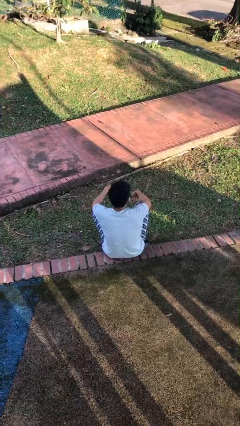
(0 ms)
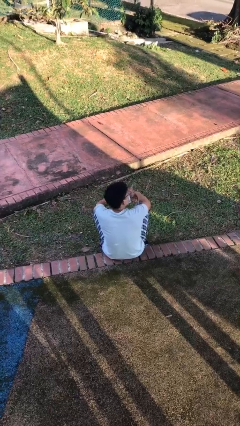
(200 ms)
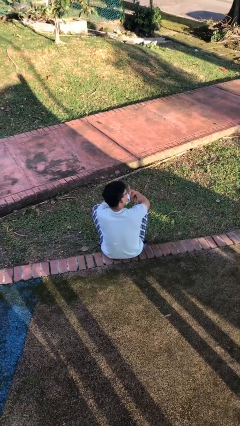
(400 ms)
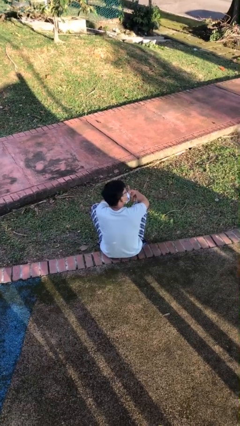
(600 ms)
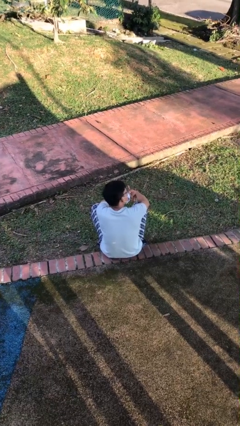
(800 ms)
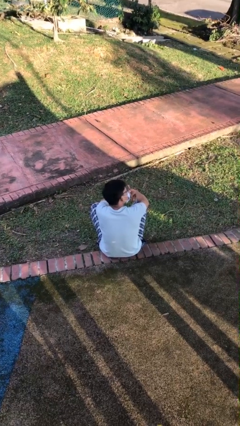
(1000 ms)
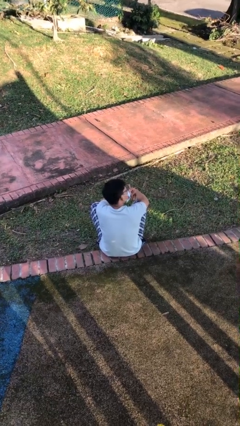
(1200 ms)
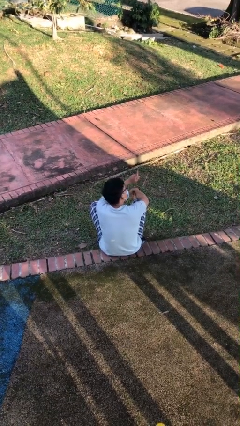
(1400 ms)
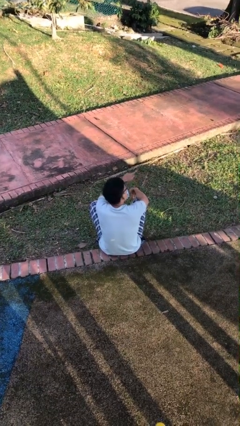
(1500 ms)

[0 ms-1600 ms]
person gestures be quiet

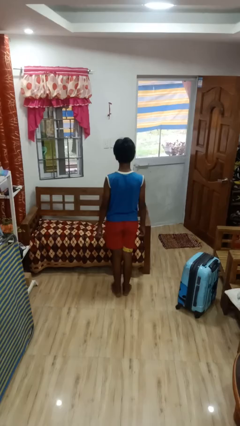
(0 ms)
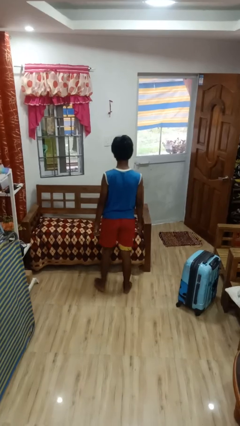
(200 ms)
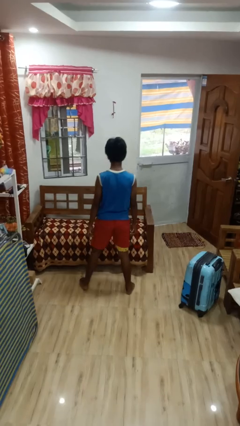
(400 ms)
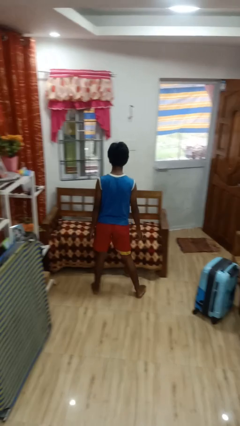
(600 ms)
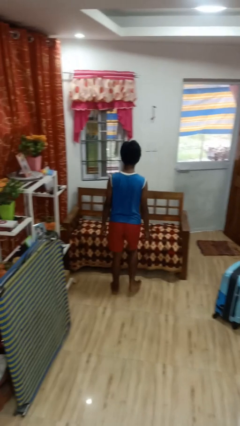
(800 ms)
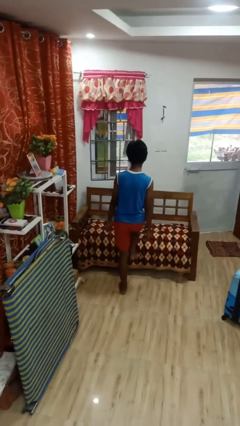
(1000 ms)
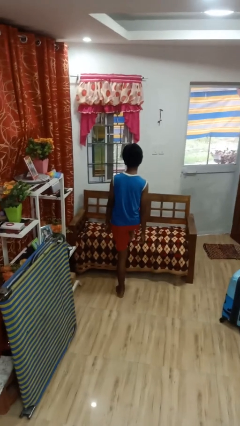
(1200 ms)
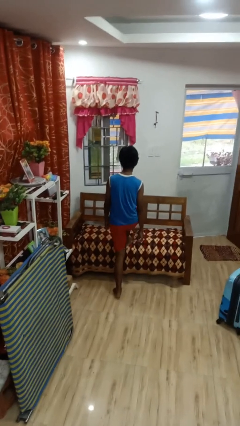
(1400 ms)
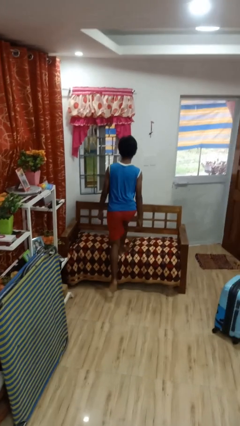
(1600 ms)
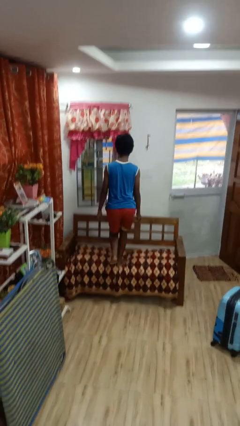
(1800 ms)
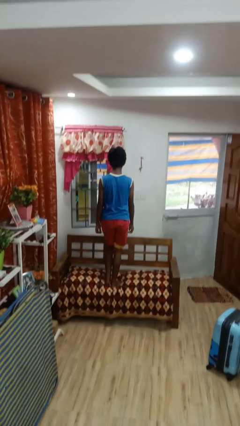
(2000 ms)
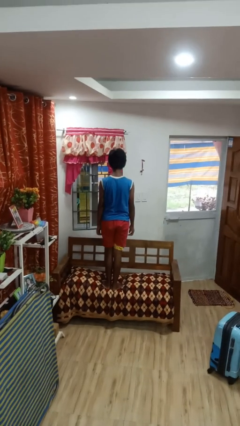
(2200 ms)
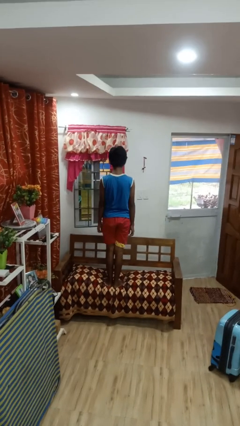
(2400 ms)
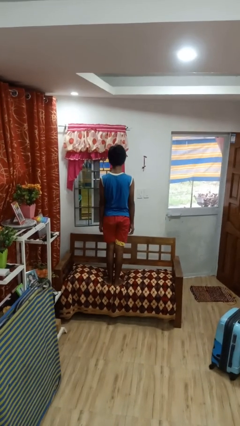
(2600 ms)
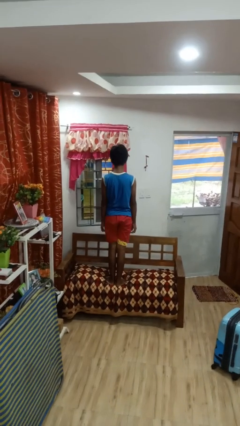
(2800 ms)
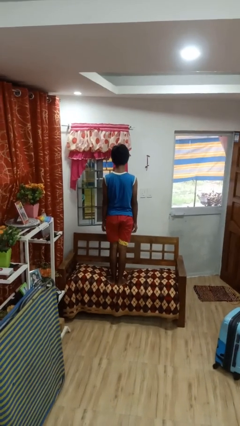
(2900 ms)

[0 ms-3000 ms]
person climbs on couch

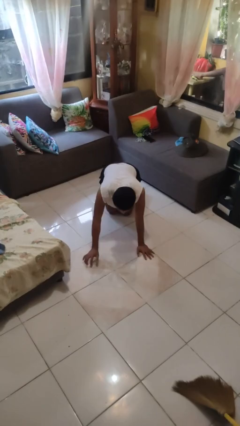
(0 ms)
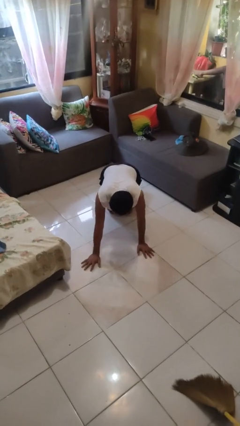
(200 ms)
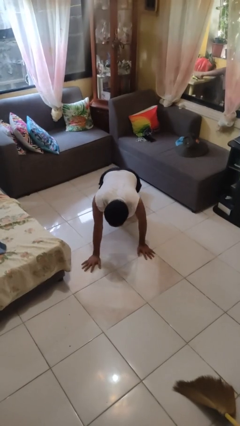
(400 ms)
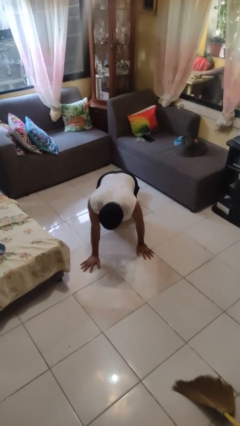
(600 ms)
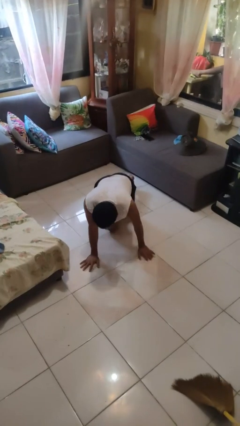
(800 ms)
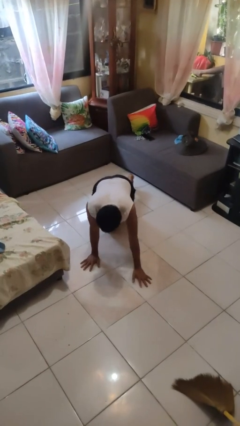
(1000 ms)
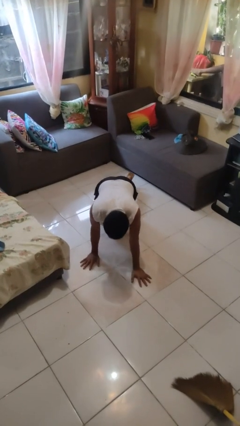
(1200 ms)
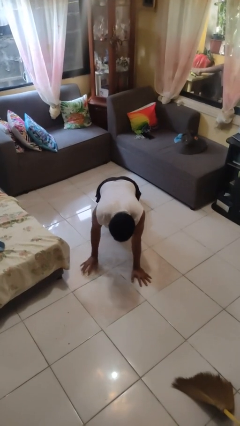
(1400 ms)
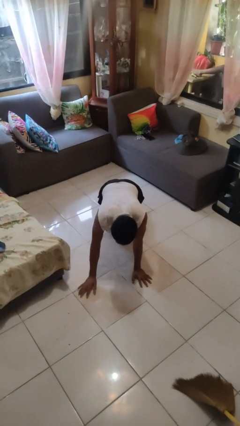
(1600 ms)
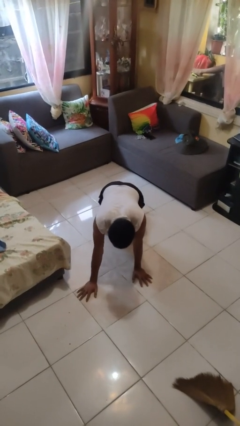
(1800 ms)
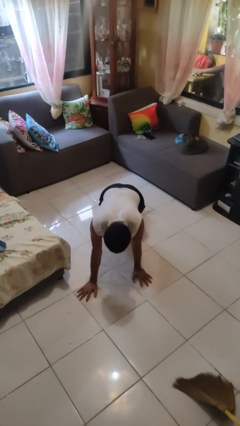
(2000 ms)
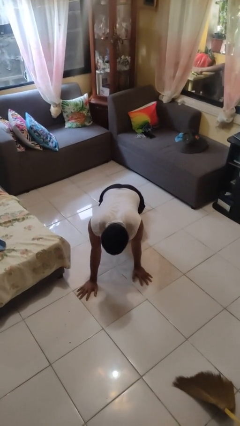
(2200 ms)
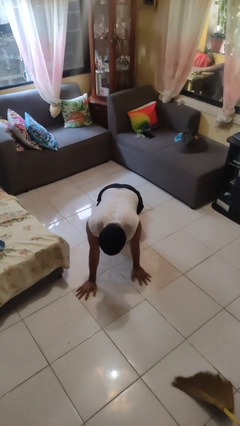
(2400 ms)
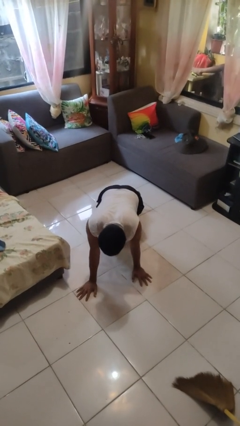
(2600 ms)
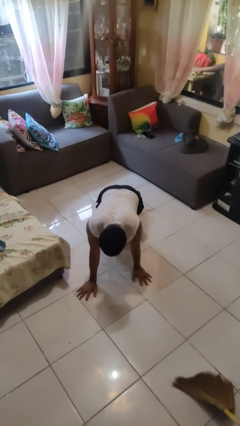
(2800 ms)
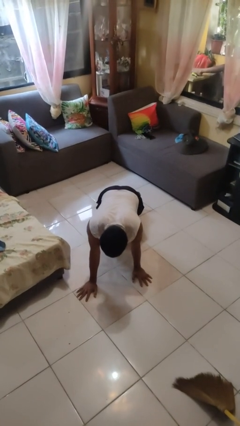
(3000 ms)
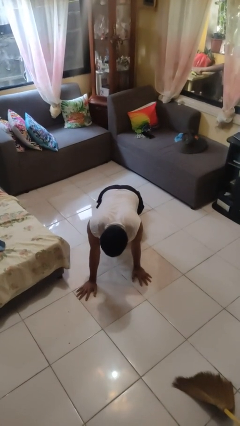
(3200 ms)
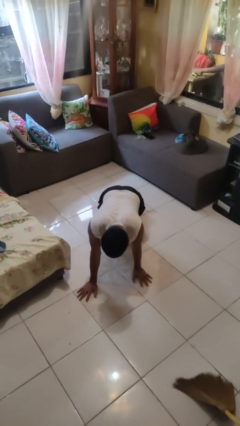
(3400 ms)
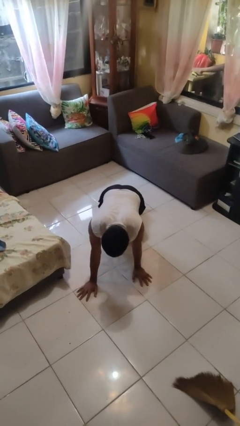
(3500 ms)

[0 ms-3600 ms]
person crawls

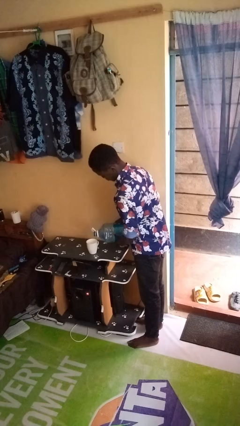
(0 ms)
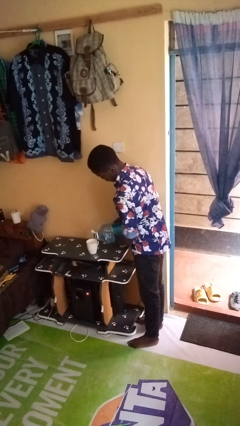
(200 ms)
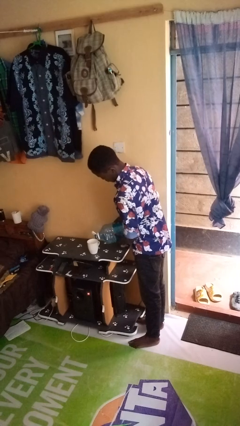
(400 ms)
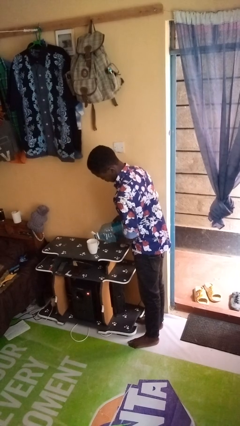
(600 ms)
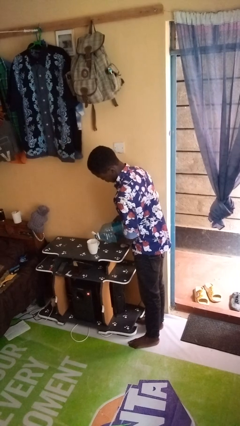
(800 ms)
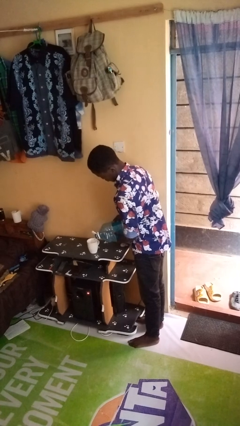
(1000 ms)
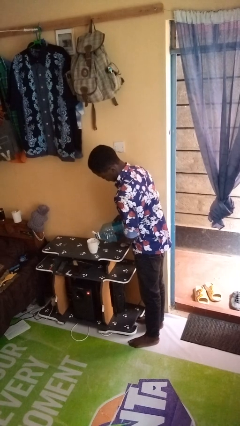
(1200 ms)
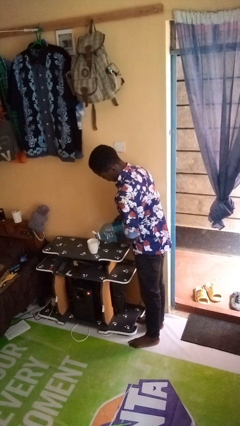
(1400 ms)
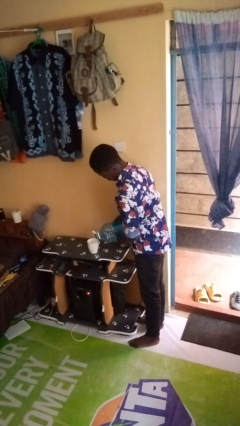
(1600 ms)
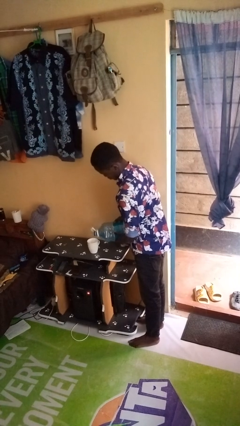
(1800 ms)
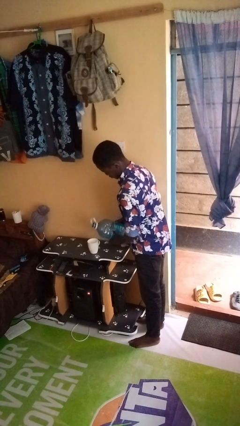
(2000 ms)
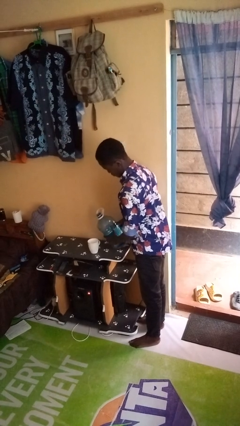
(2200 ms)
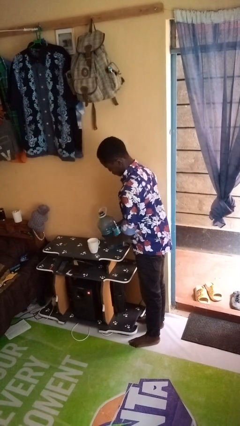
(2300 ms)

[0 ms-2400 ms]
person pours liquid into cup

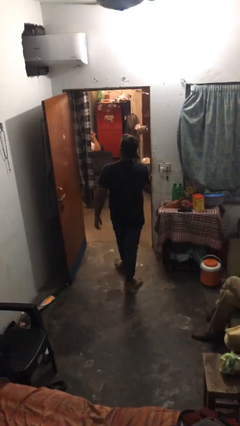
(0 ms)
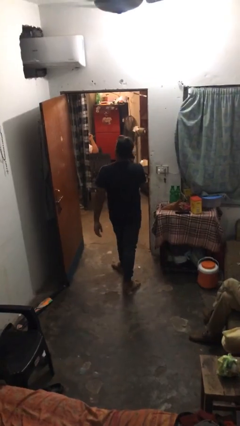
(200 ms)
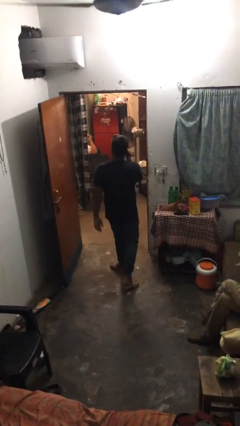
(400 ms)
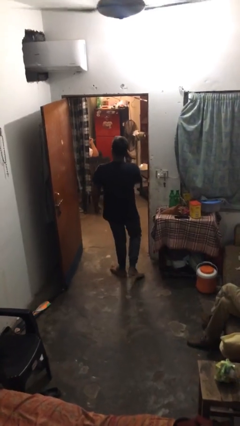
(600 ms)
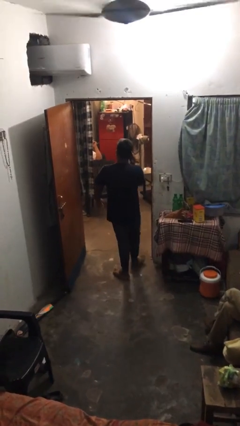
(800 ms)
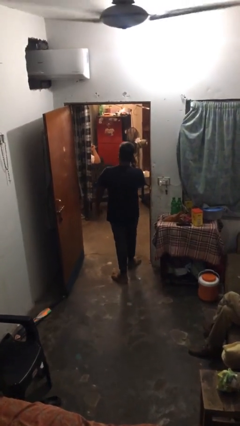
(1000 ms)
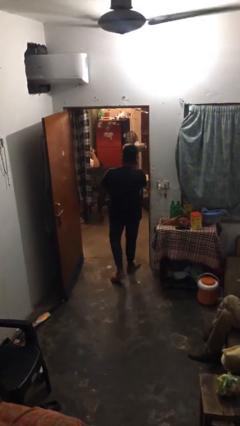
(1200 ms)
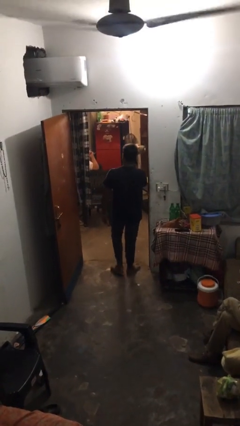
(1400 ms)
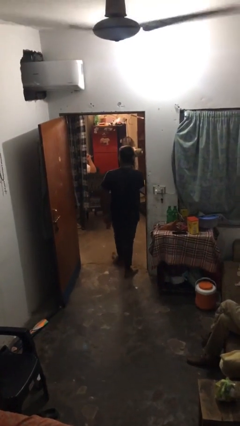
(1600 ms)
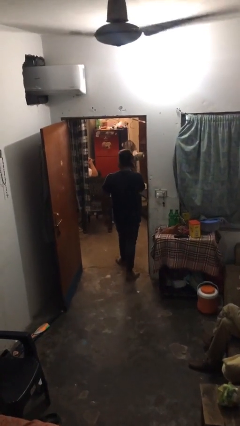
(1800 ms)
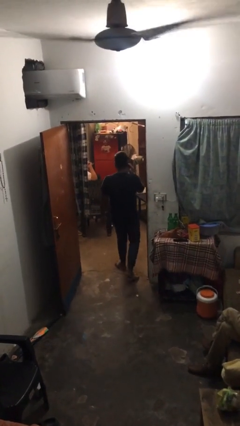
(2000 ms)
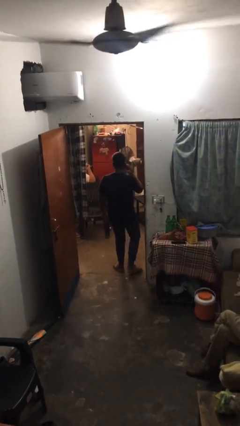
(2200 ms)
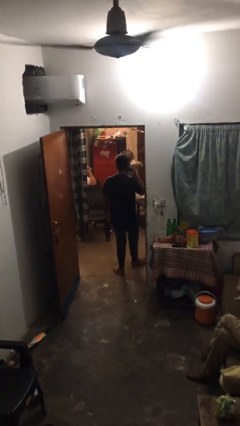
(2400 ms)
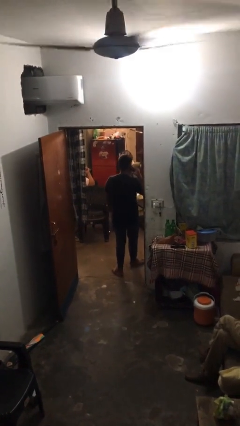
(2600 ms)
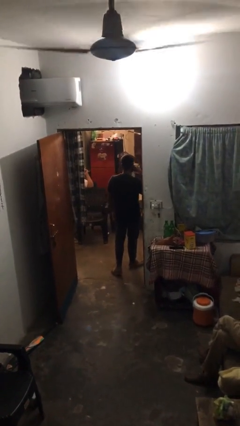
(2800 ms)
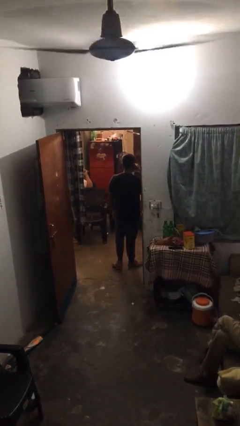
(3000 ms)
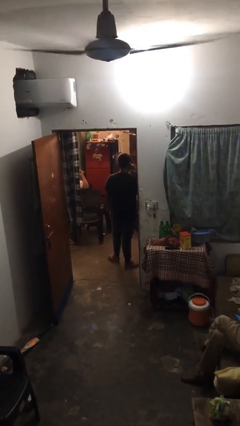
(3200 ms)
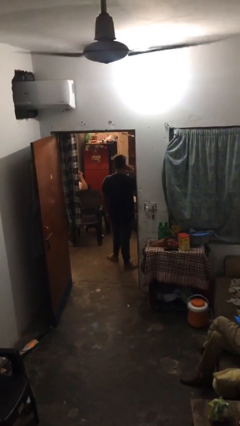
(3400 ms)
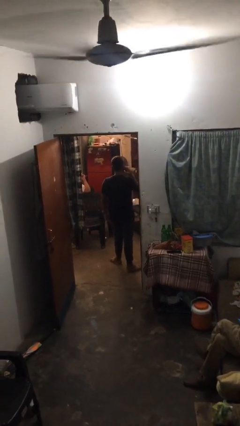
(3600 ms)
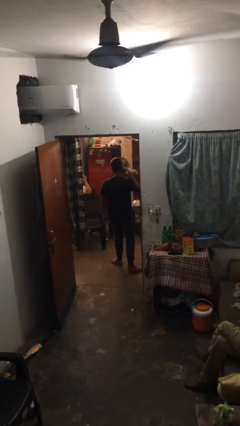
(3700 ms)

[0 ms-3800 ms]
person exits scene through structure

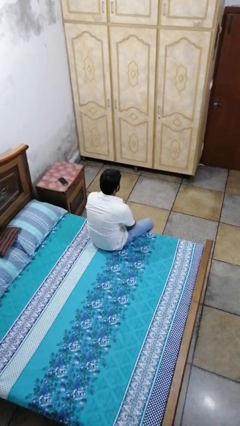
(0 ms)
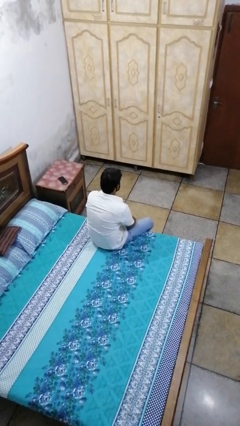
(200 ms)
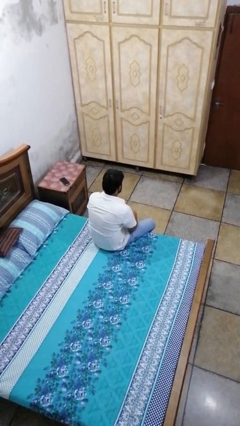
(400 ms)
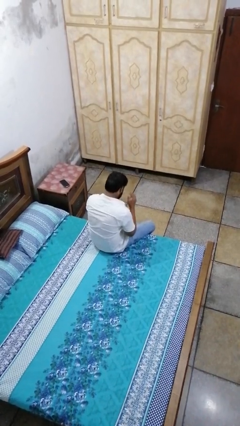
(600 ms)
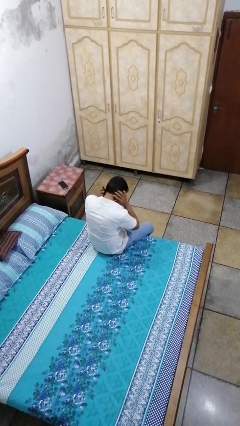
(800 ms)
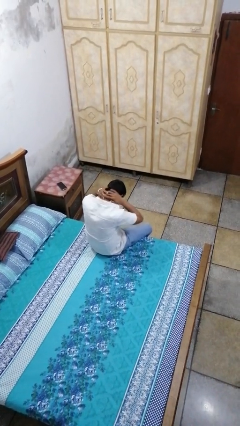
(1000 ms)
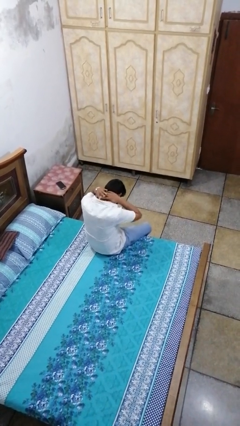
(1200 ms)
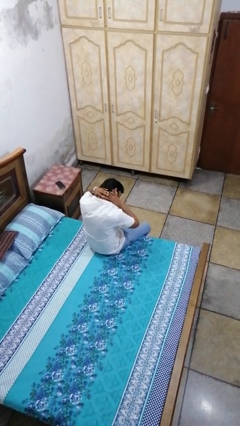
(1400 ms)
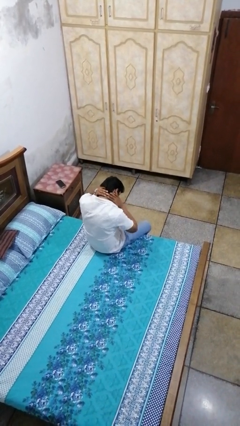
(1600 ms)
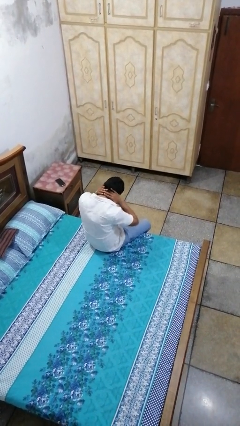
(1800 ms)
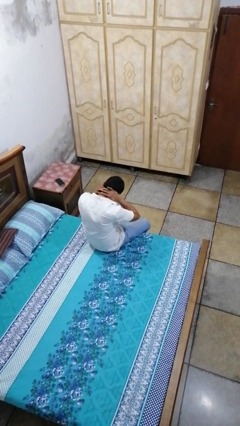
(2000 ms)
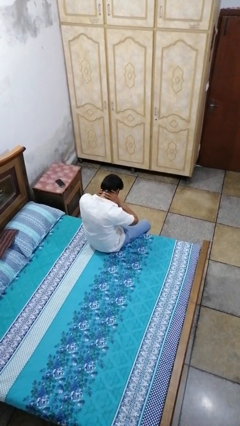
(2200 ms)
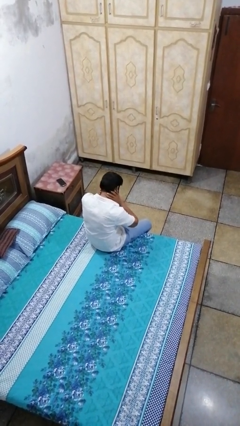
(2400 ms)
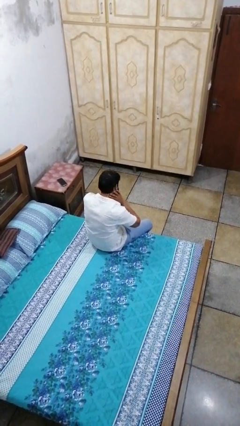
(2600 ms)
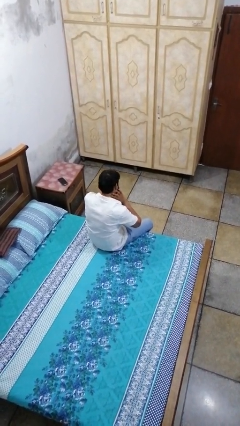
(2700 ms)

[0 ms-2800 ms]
person rubs neck

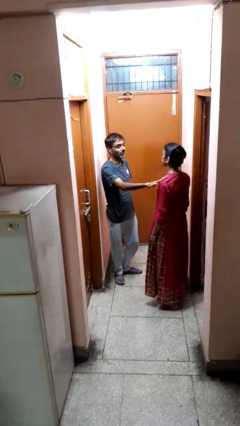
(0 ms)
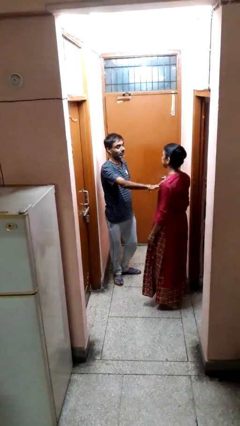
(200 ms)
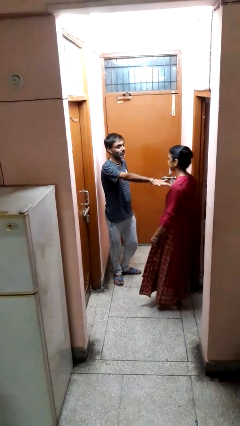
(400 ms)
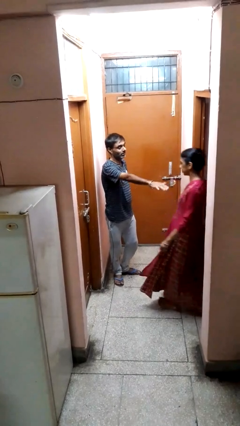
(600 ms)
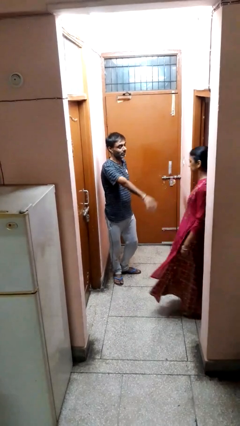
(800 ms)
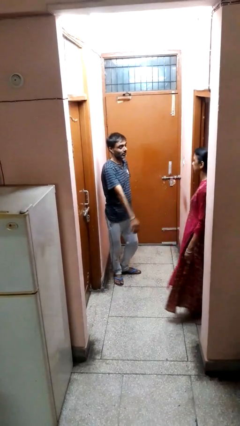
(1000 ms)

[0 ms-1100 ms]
person shoves person
